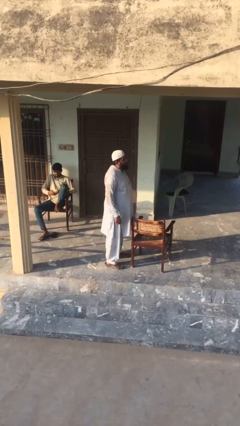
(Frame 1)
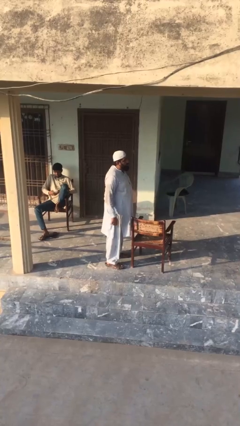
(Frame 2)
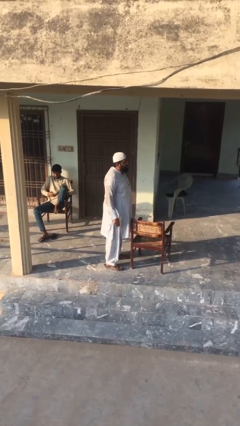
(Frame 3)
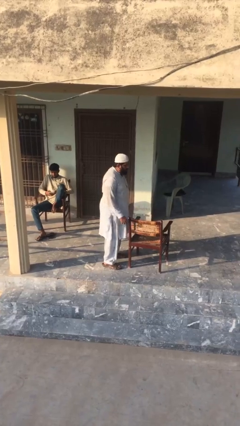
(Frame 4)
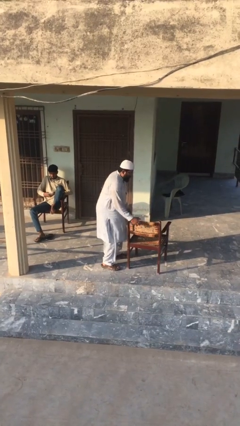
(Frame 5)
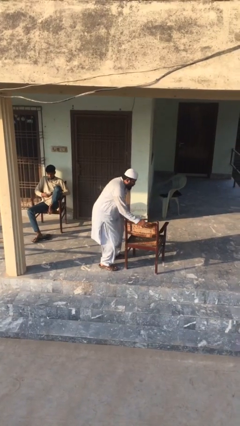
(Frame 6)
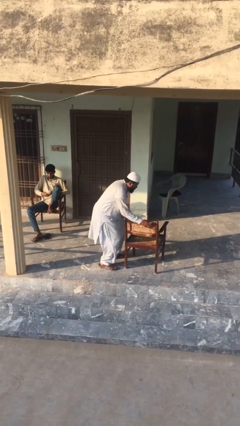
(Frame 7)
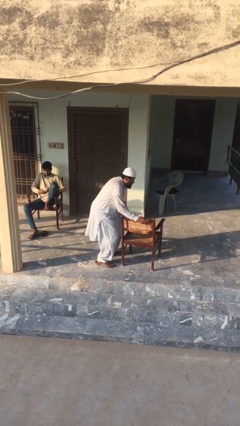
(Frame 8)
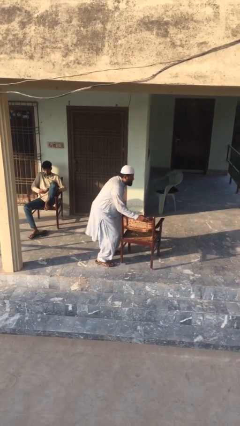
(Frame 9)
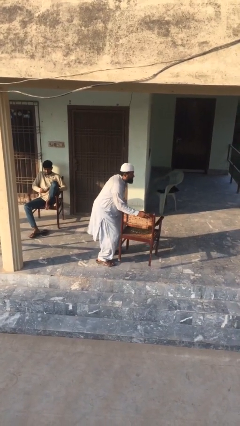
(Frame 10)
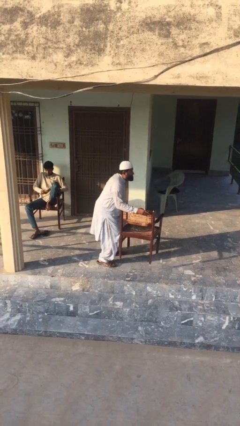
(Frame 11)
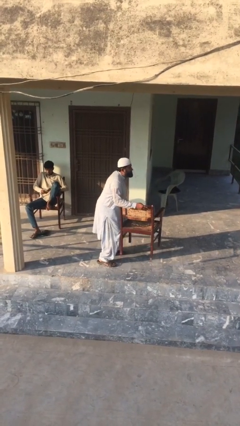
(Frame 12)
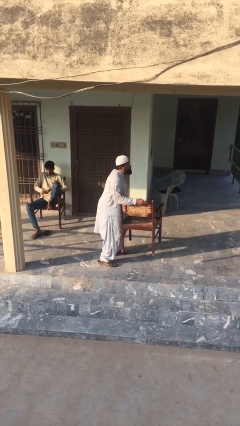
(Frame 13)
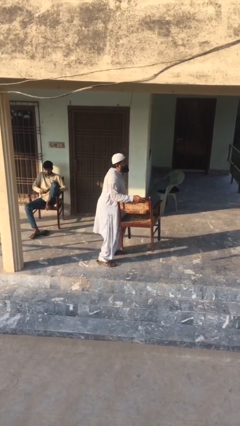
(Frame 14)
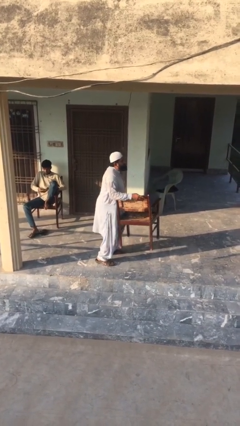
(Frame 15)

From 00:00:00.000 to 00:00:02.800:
person picks up object from floor

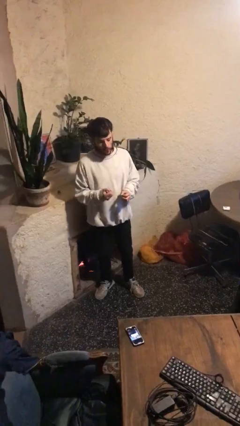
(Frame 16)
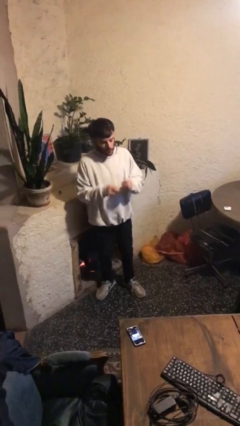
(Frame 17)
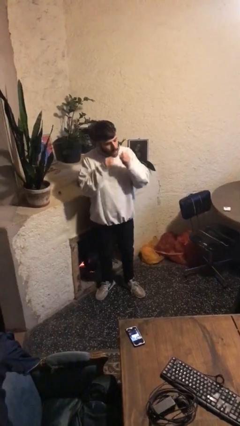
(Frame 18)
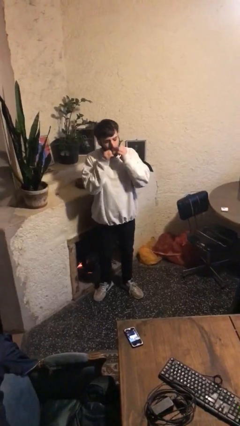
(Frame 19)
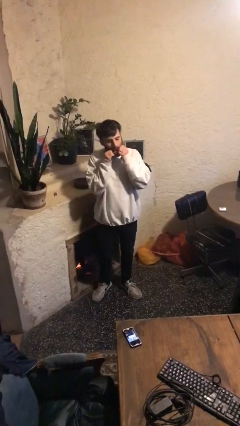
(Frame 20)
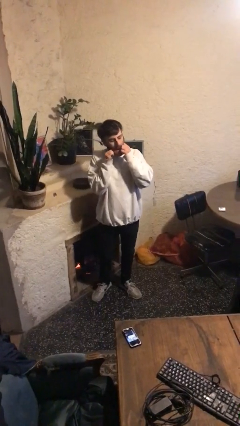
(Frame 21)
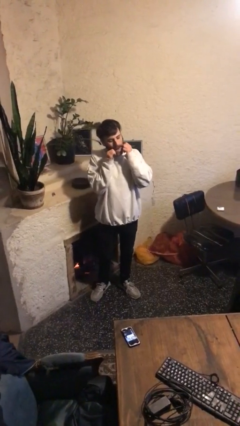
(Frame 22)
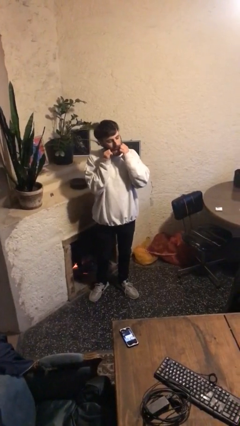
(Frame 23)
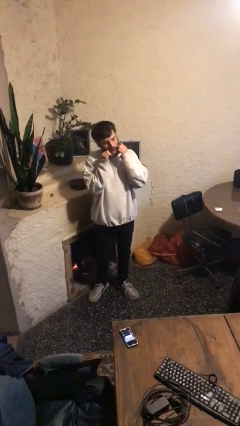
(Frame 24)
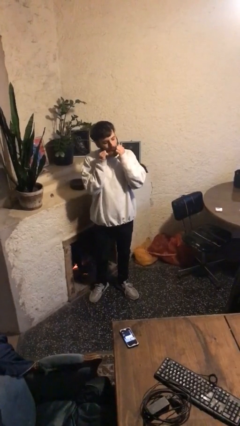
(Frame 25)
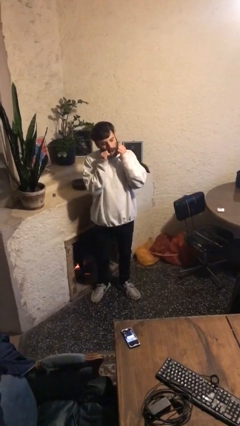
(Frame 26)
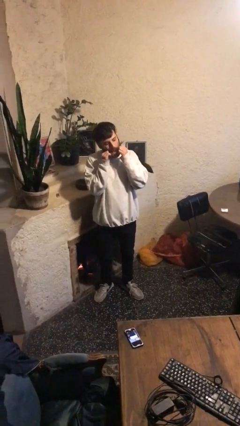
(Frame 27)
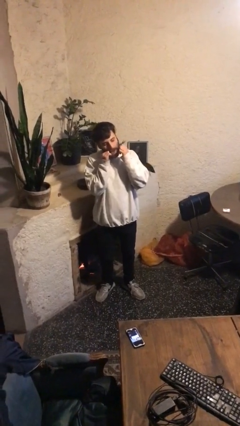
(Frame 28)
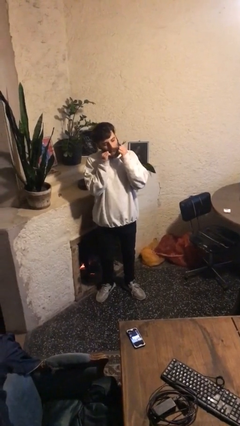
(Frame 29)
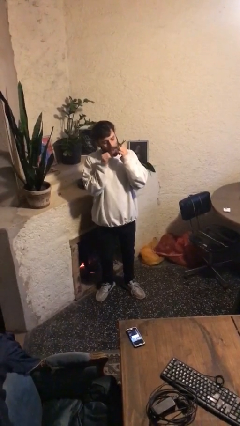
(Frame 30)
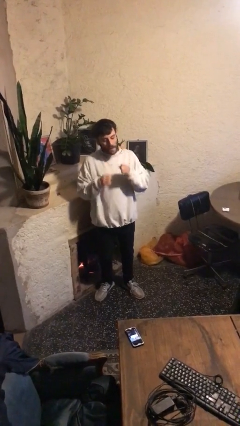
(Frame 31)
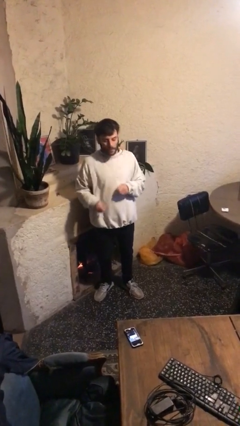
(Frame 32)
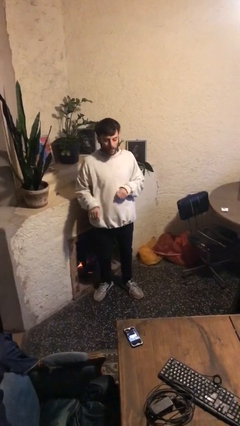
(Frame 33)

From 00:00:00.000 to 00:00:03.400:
person flosses

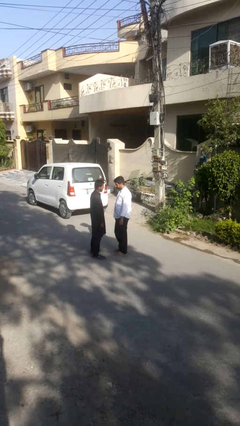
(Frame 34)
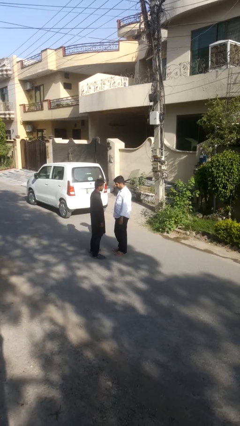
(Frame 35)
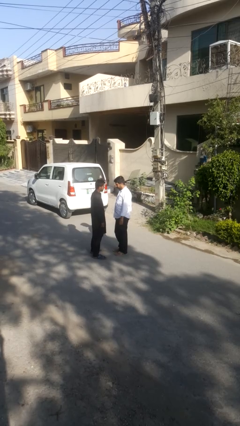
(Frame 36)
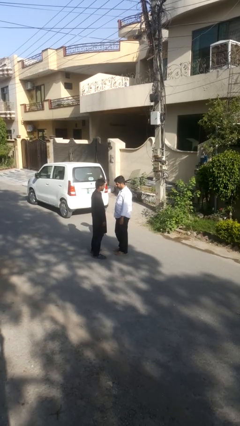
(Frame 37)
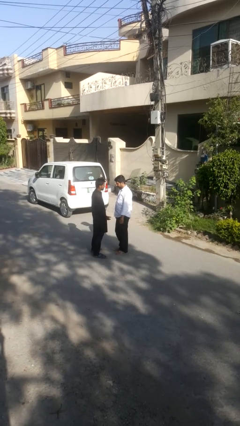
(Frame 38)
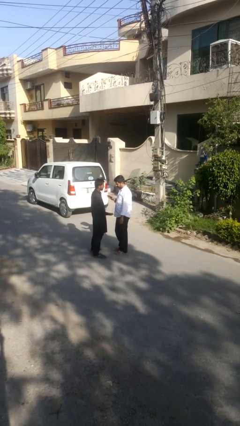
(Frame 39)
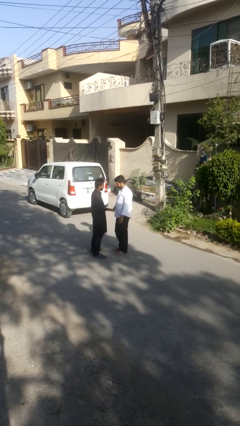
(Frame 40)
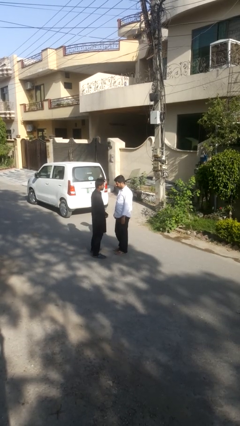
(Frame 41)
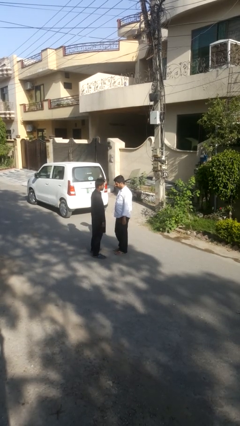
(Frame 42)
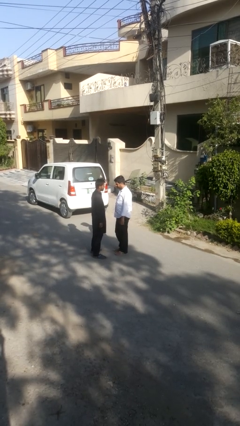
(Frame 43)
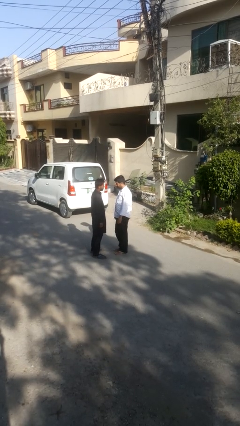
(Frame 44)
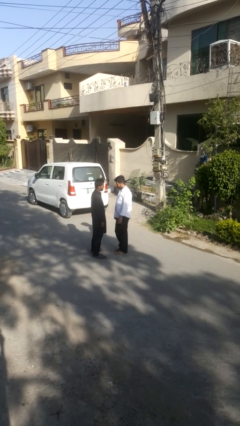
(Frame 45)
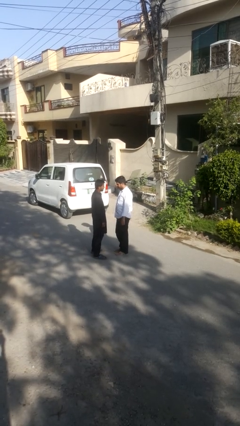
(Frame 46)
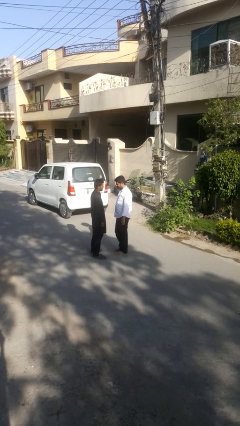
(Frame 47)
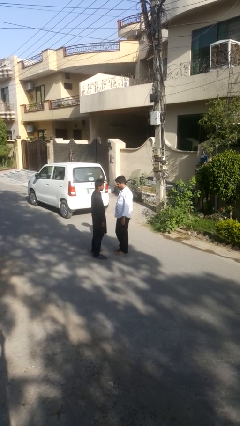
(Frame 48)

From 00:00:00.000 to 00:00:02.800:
person highfives hand

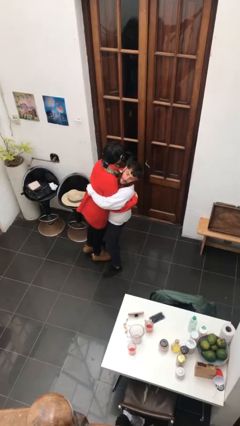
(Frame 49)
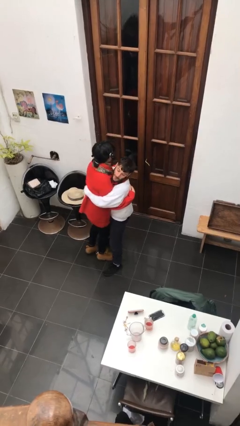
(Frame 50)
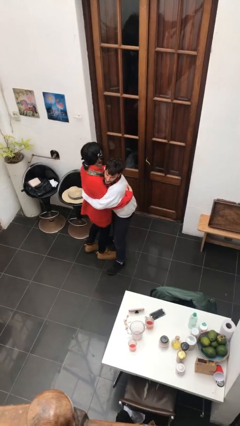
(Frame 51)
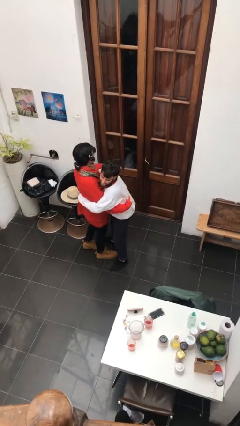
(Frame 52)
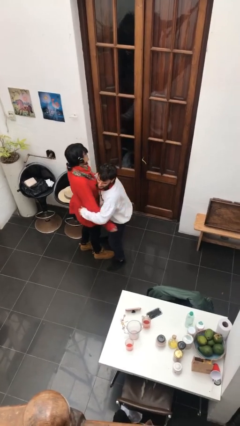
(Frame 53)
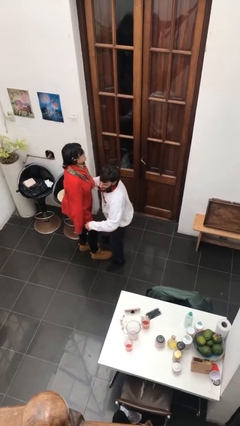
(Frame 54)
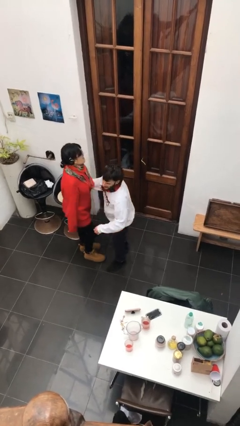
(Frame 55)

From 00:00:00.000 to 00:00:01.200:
person puts down person

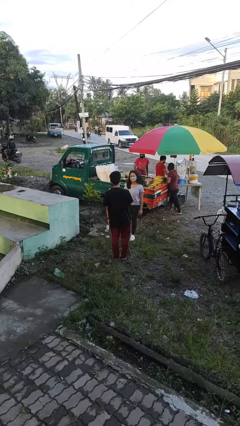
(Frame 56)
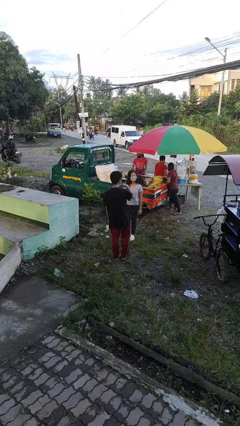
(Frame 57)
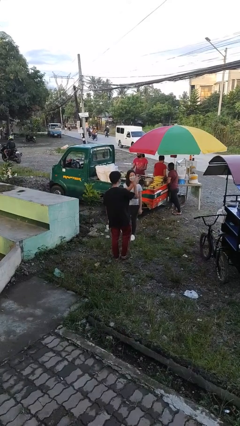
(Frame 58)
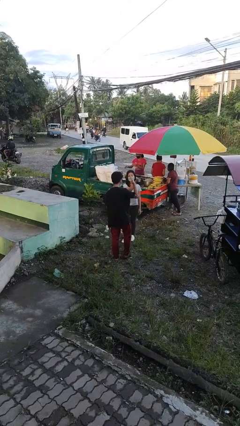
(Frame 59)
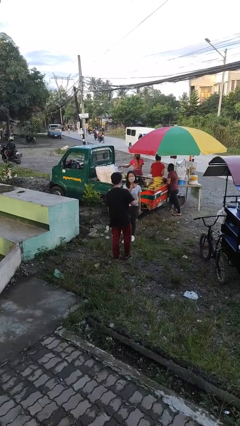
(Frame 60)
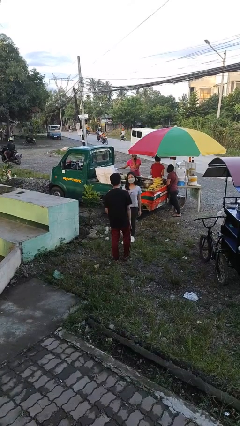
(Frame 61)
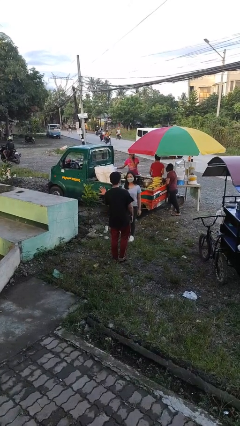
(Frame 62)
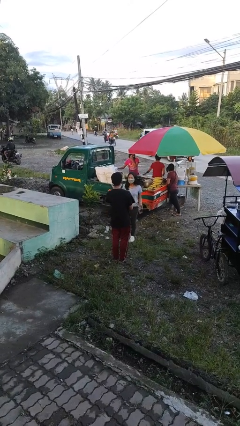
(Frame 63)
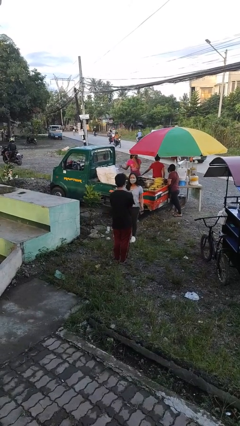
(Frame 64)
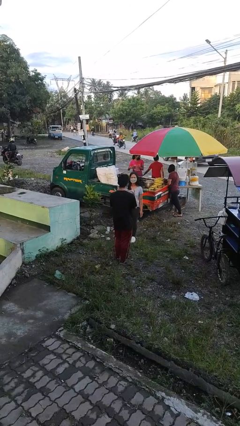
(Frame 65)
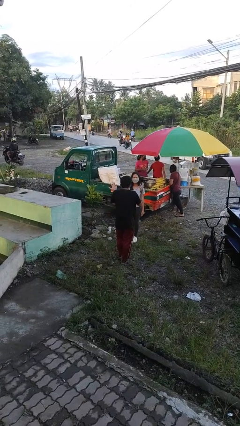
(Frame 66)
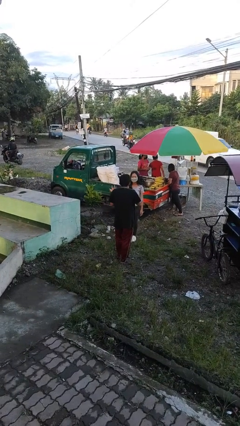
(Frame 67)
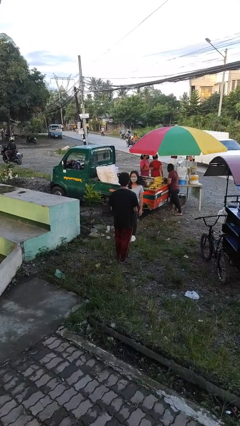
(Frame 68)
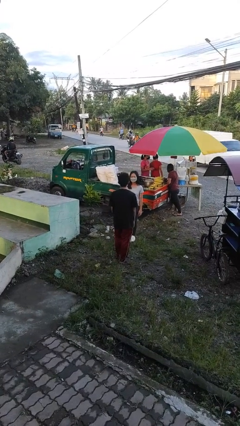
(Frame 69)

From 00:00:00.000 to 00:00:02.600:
person talks to person

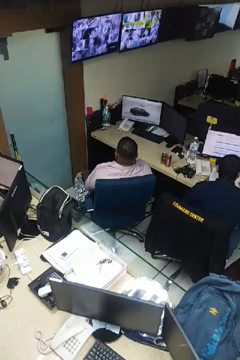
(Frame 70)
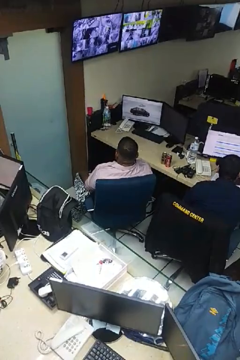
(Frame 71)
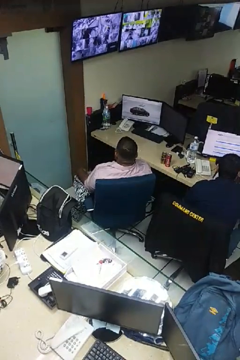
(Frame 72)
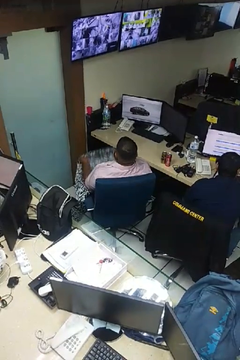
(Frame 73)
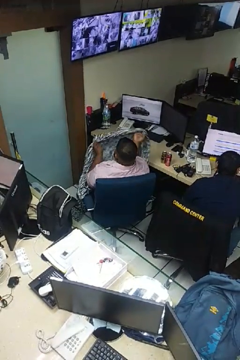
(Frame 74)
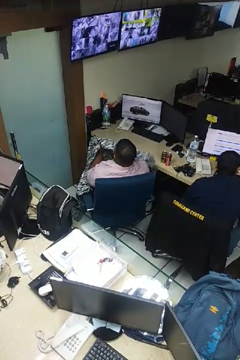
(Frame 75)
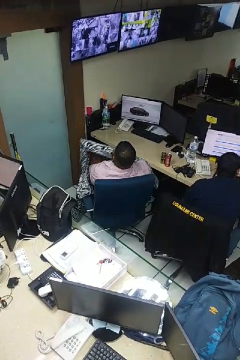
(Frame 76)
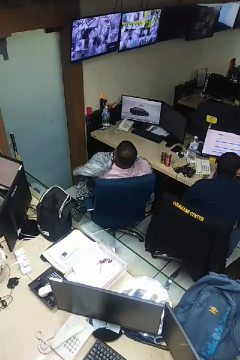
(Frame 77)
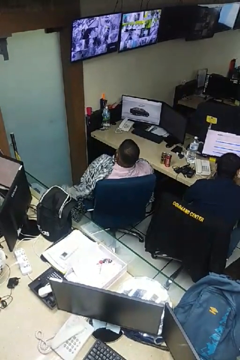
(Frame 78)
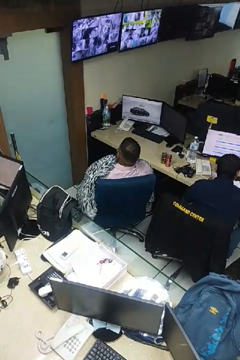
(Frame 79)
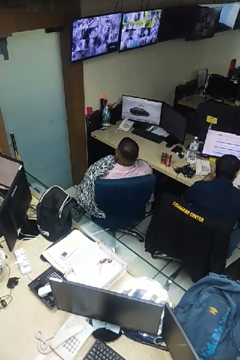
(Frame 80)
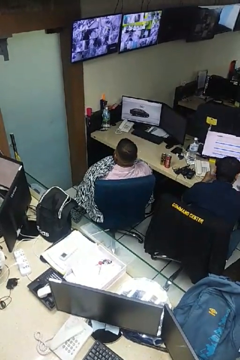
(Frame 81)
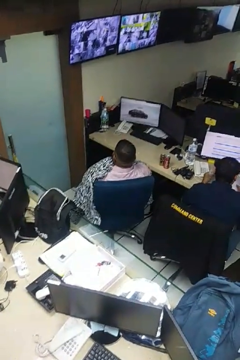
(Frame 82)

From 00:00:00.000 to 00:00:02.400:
person covers with blanket

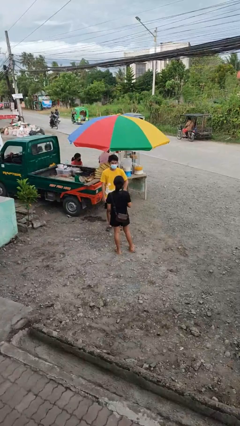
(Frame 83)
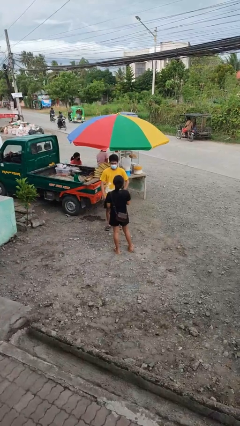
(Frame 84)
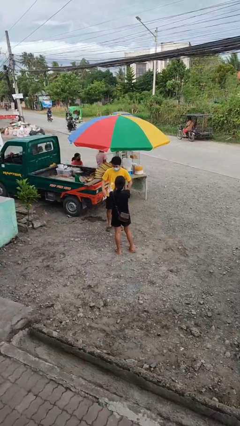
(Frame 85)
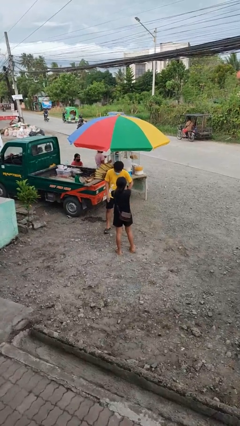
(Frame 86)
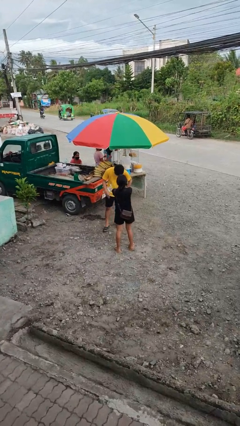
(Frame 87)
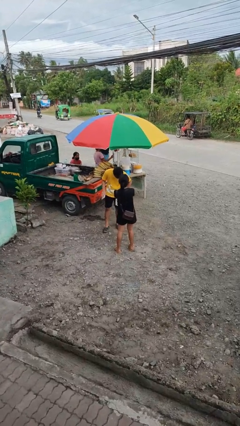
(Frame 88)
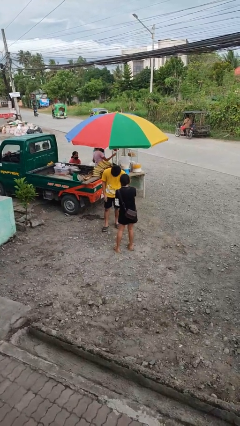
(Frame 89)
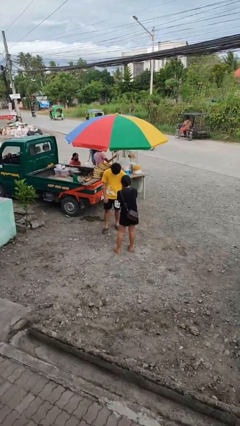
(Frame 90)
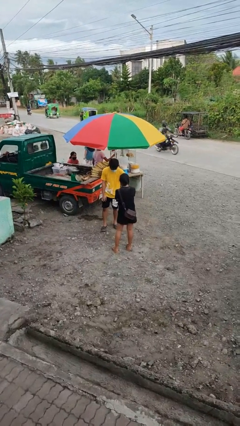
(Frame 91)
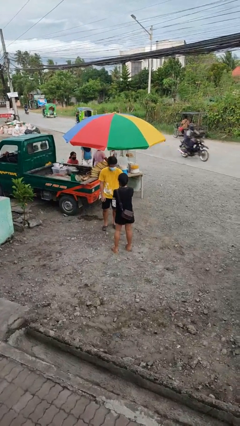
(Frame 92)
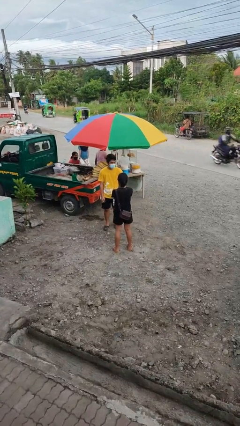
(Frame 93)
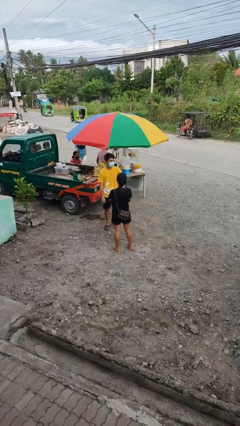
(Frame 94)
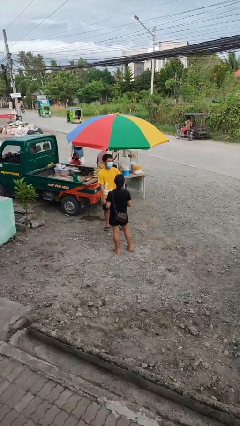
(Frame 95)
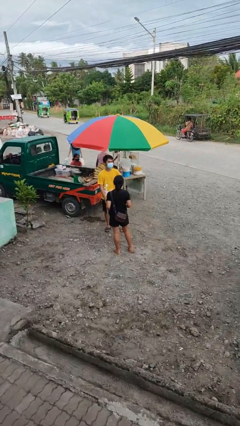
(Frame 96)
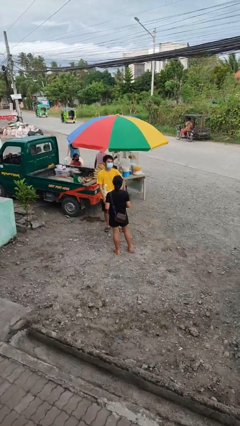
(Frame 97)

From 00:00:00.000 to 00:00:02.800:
person laughs with person
